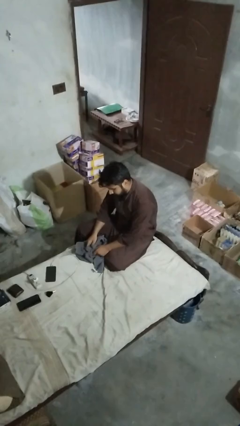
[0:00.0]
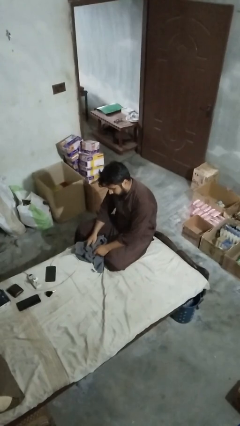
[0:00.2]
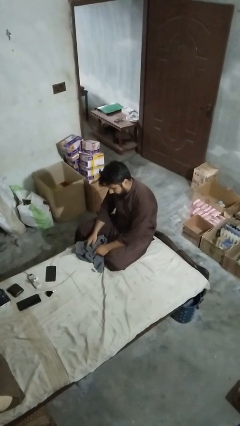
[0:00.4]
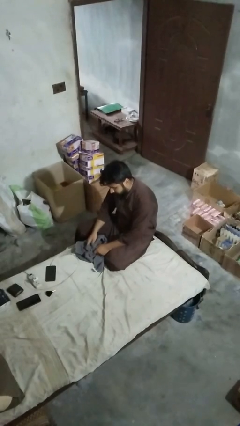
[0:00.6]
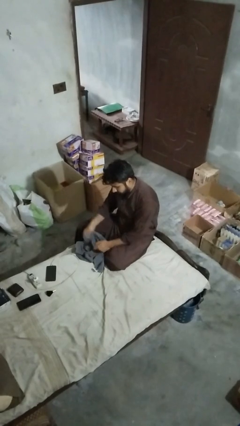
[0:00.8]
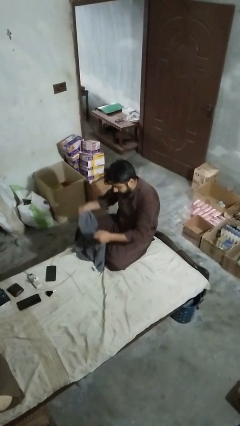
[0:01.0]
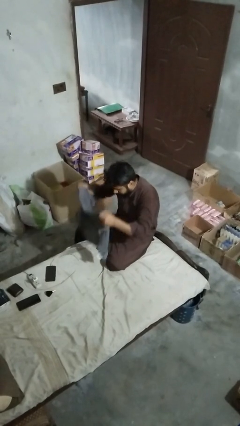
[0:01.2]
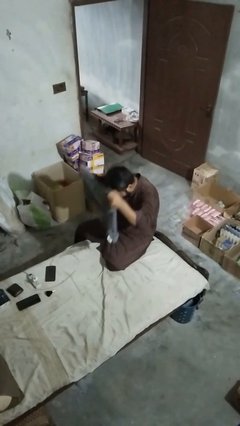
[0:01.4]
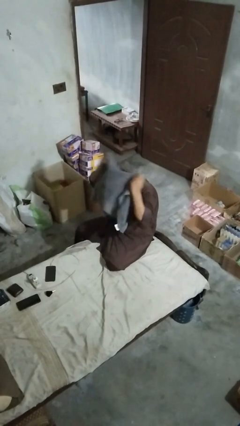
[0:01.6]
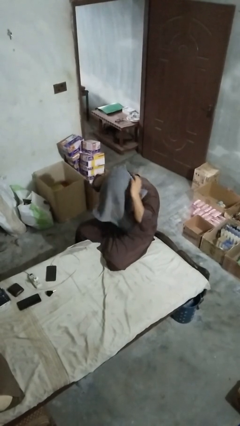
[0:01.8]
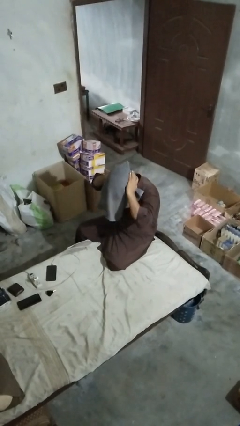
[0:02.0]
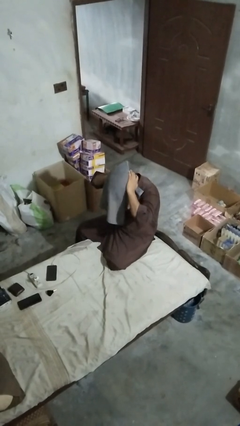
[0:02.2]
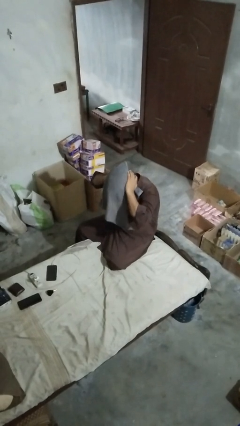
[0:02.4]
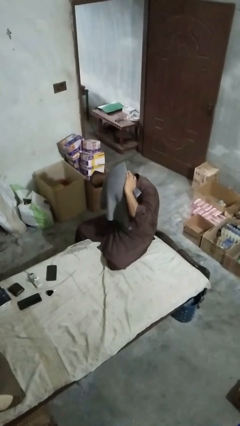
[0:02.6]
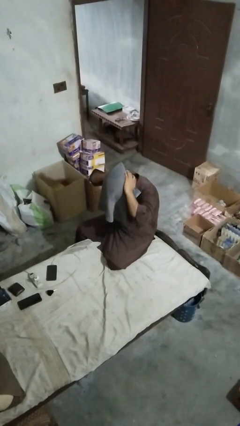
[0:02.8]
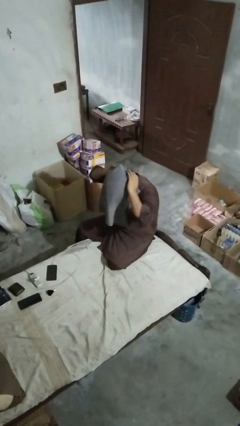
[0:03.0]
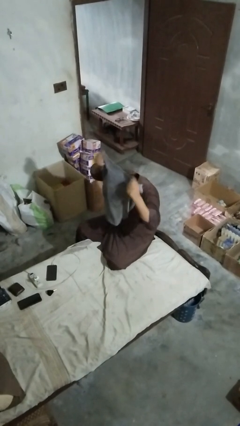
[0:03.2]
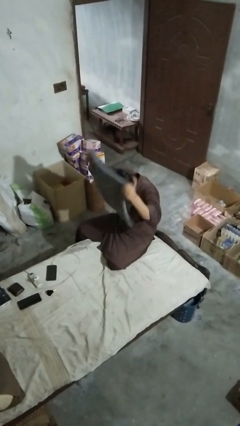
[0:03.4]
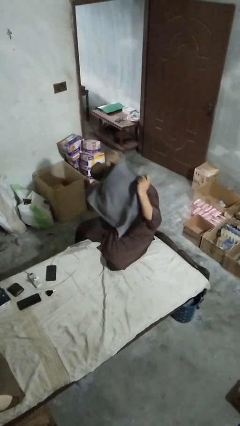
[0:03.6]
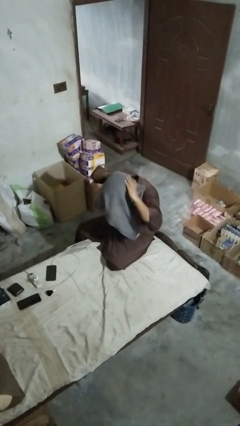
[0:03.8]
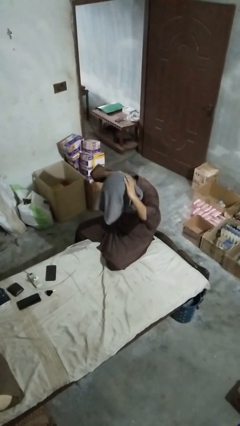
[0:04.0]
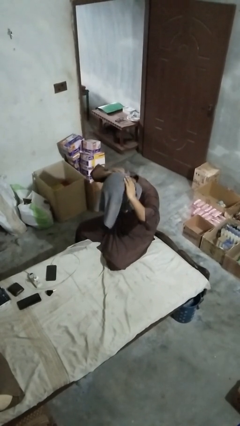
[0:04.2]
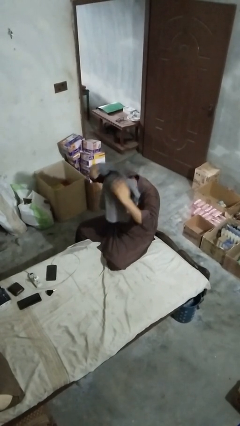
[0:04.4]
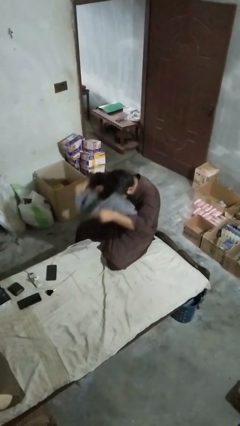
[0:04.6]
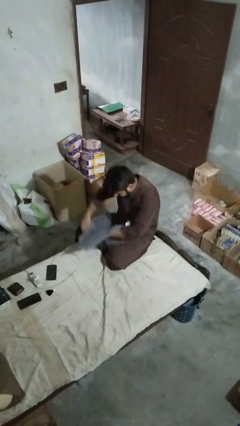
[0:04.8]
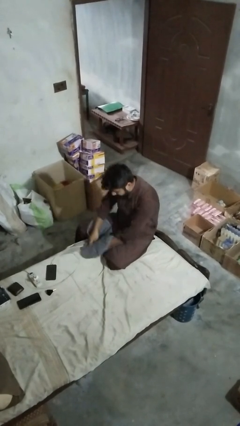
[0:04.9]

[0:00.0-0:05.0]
person dries hair with towel

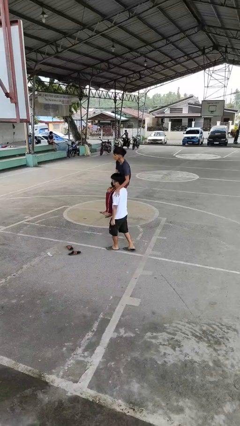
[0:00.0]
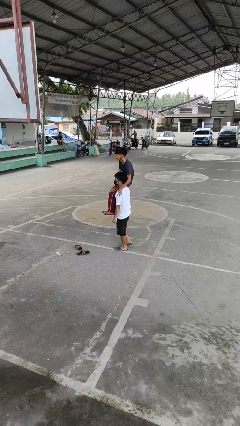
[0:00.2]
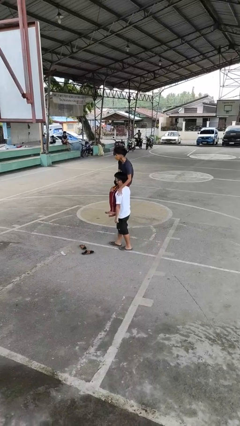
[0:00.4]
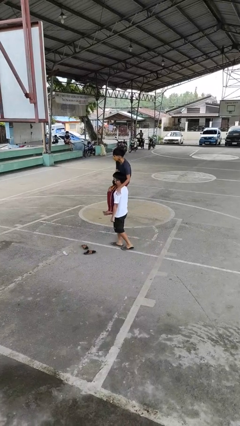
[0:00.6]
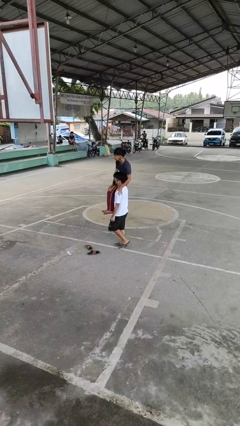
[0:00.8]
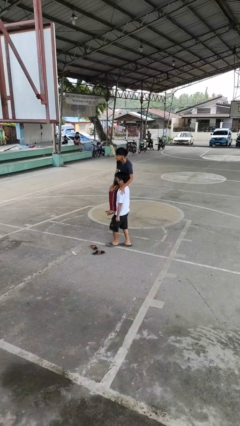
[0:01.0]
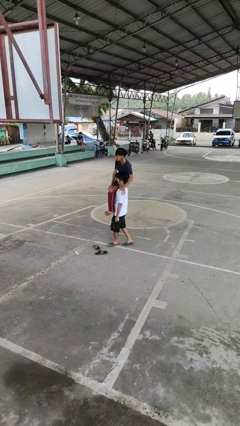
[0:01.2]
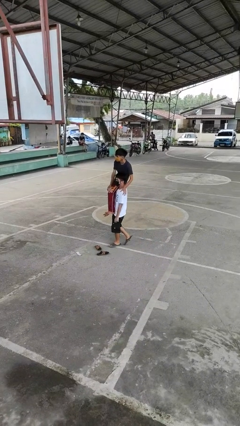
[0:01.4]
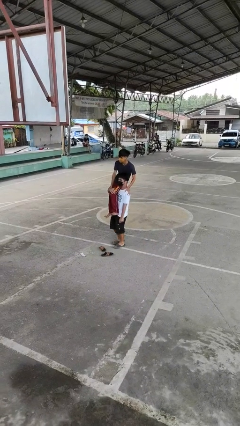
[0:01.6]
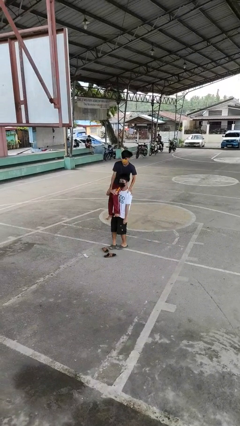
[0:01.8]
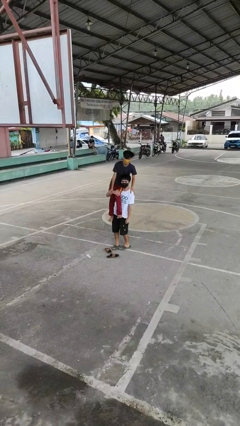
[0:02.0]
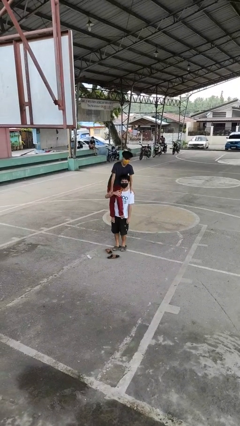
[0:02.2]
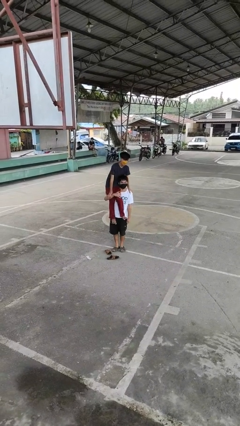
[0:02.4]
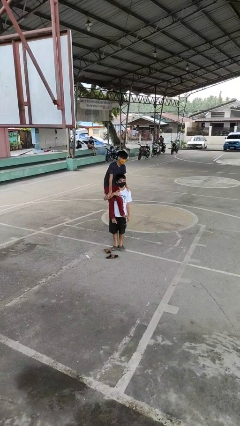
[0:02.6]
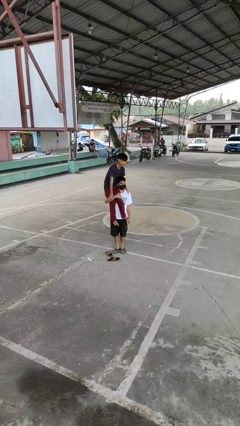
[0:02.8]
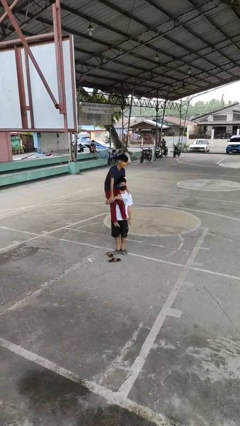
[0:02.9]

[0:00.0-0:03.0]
person carries person on shoulders

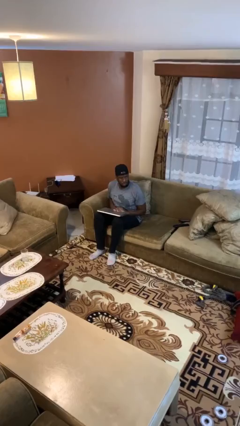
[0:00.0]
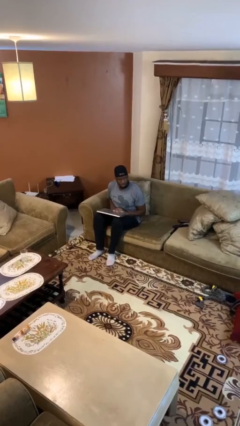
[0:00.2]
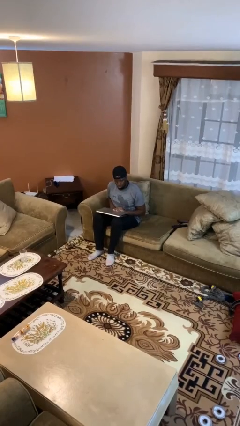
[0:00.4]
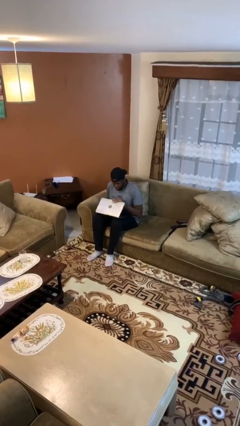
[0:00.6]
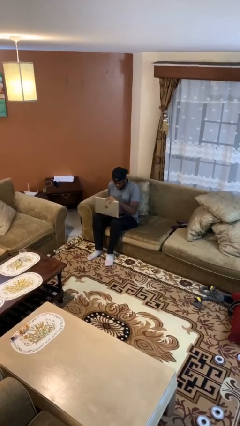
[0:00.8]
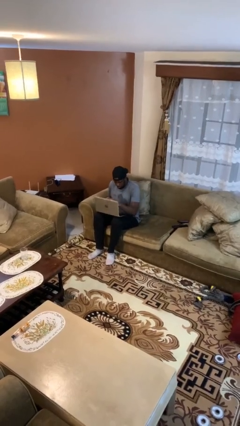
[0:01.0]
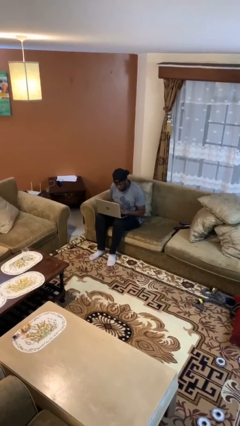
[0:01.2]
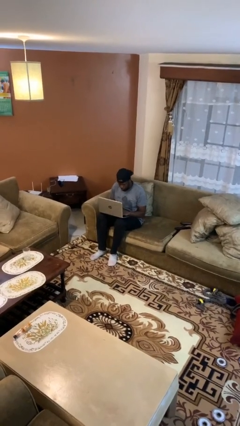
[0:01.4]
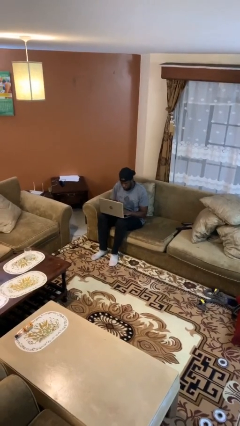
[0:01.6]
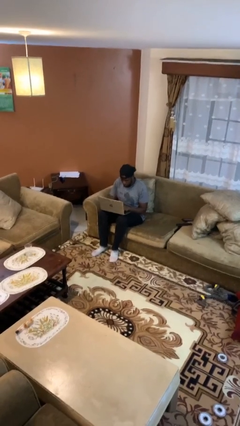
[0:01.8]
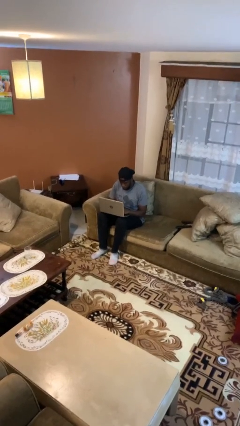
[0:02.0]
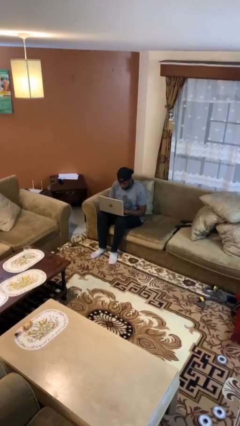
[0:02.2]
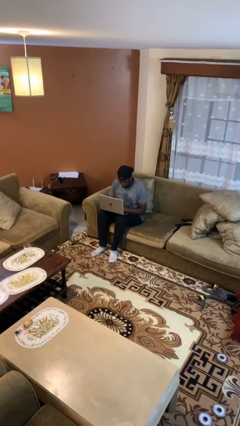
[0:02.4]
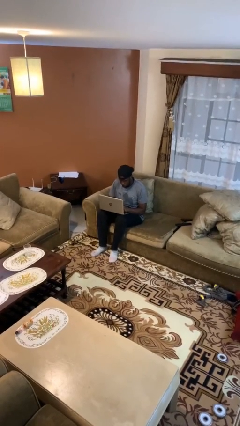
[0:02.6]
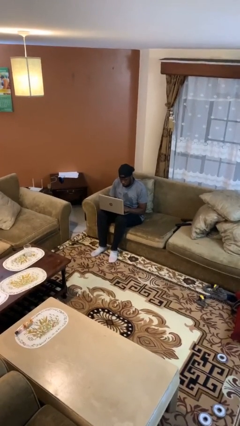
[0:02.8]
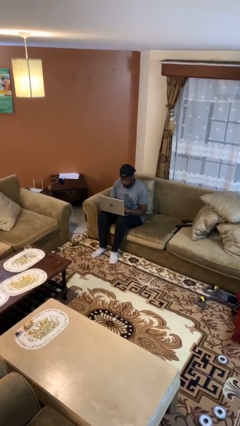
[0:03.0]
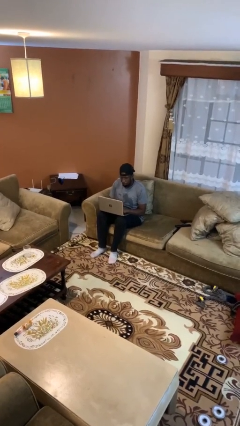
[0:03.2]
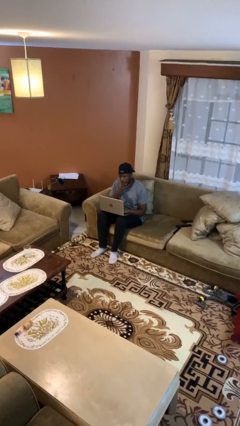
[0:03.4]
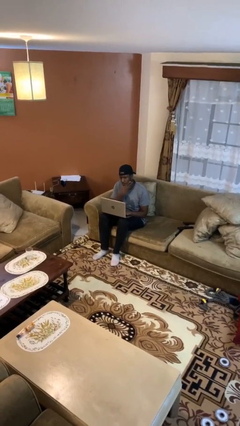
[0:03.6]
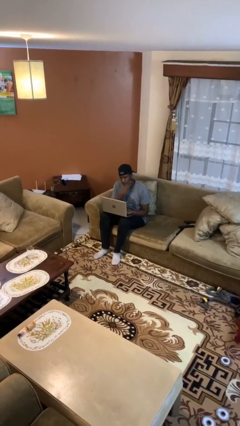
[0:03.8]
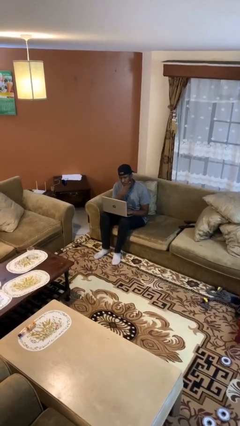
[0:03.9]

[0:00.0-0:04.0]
person interacts with laptop

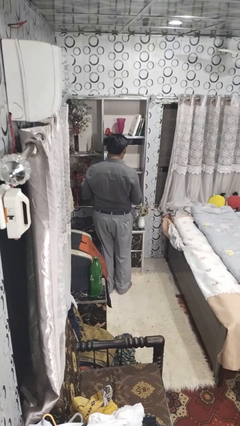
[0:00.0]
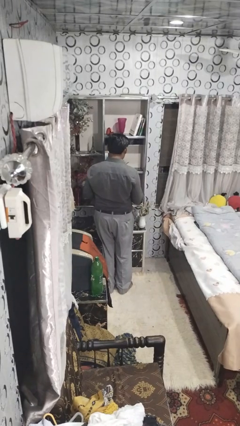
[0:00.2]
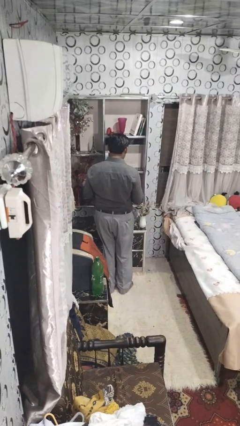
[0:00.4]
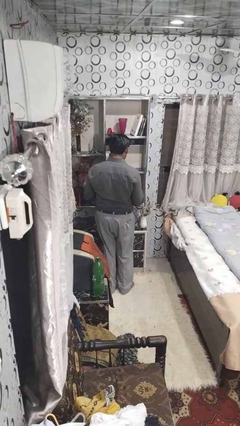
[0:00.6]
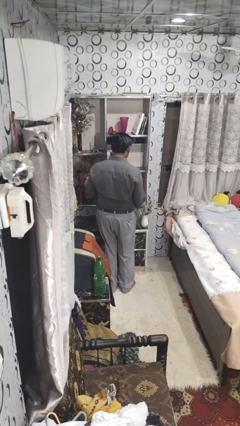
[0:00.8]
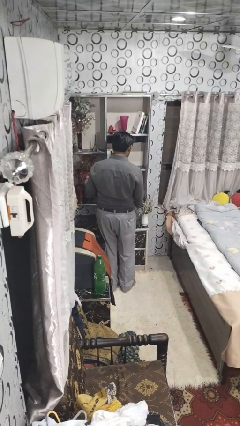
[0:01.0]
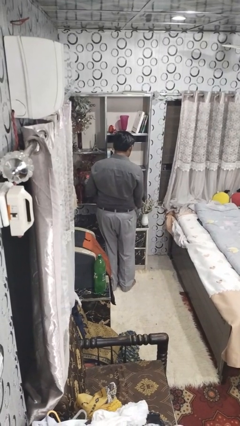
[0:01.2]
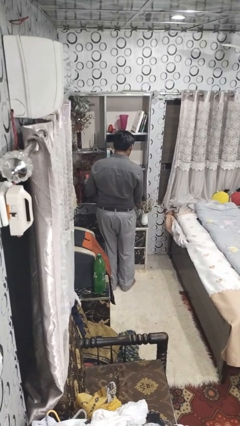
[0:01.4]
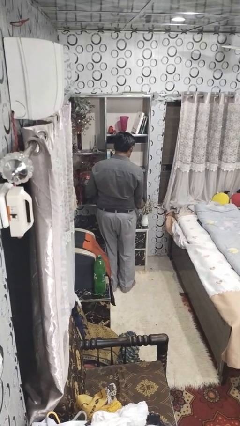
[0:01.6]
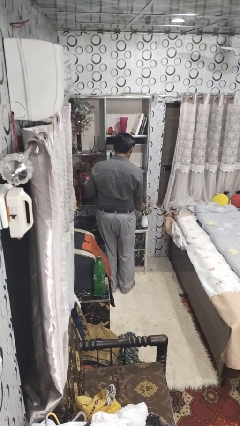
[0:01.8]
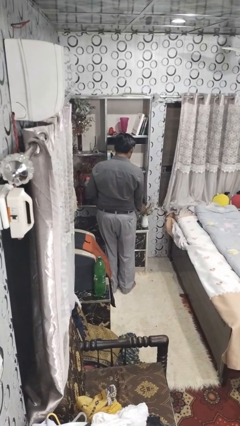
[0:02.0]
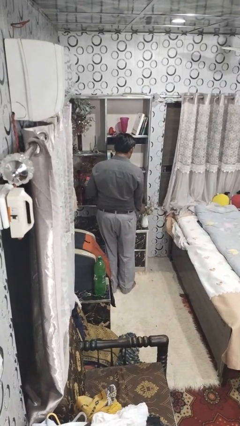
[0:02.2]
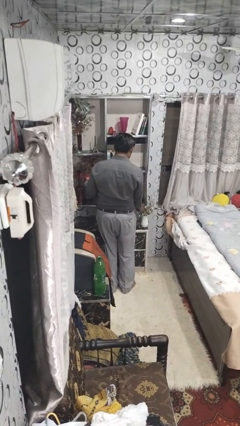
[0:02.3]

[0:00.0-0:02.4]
person arranges flowers in vase

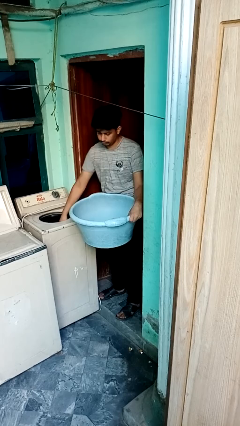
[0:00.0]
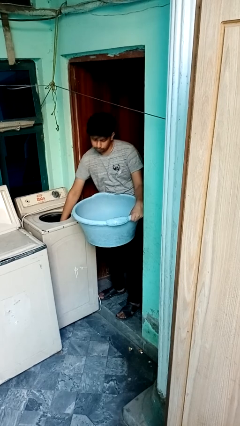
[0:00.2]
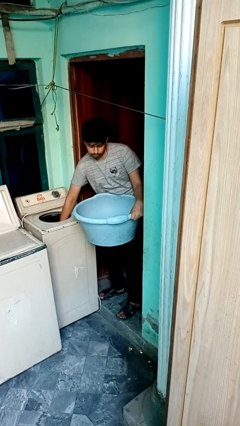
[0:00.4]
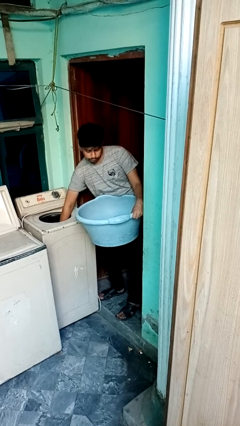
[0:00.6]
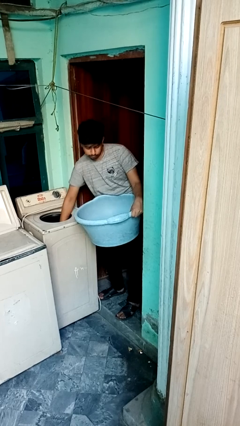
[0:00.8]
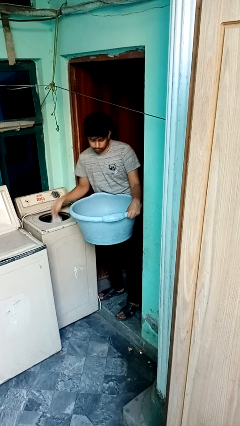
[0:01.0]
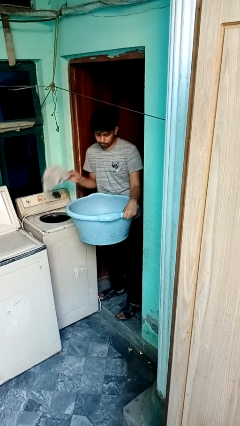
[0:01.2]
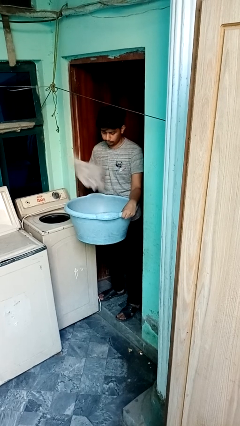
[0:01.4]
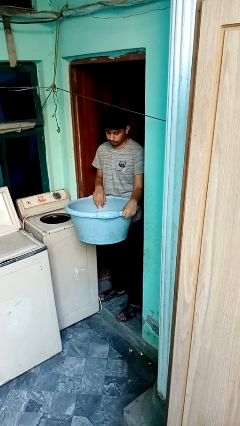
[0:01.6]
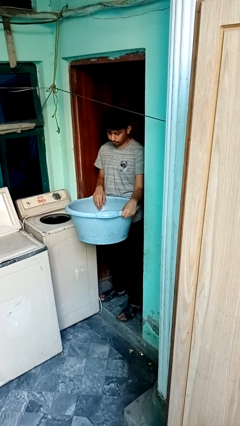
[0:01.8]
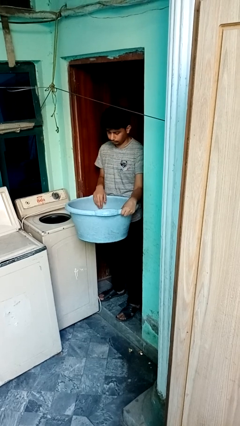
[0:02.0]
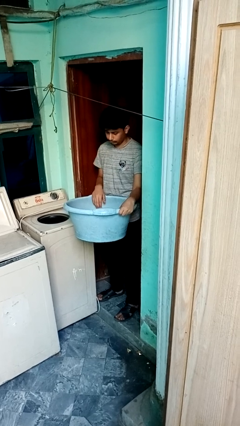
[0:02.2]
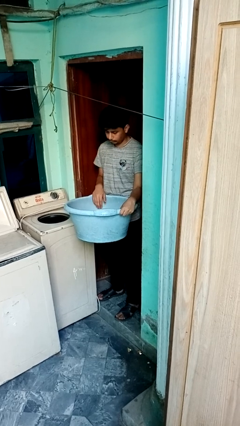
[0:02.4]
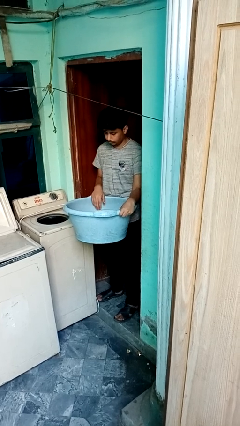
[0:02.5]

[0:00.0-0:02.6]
person unloads dryer

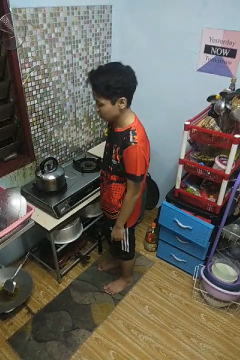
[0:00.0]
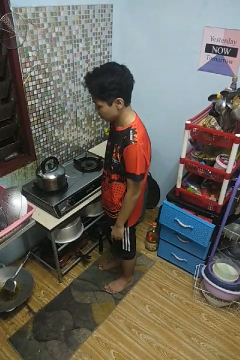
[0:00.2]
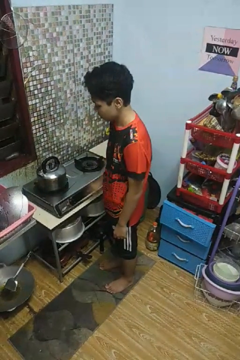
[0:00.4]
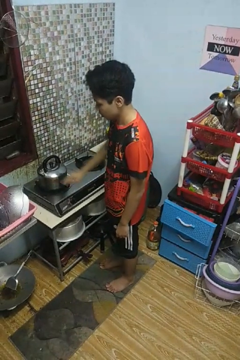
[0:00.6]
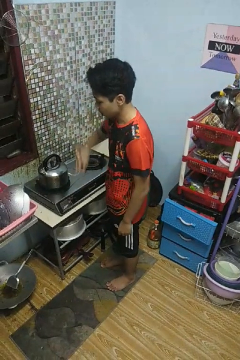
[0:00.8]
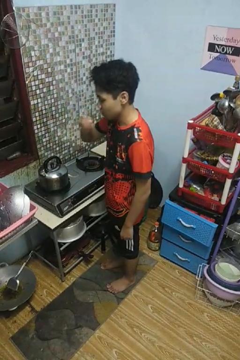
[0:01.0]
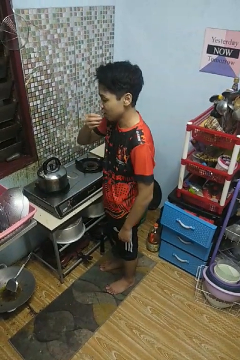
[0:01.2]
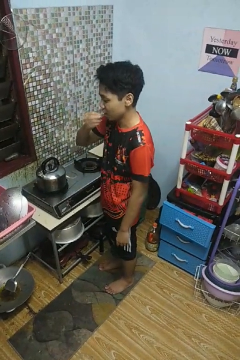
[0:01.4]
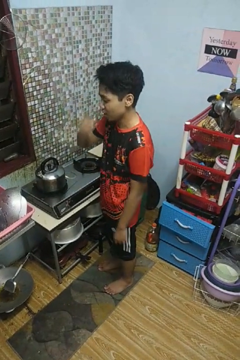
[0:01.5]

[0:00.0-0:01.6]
person burns hand
